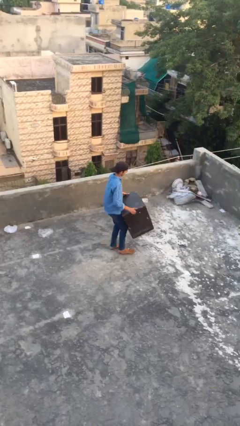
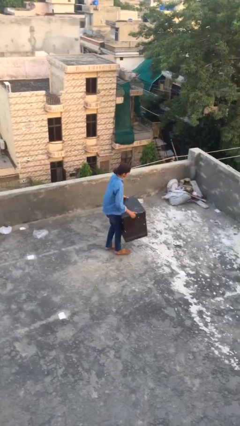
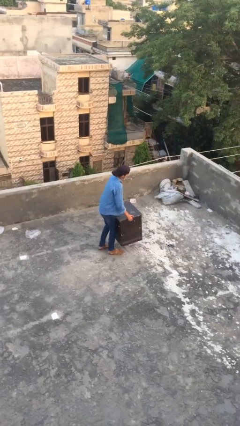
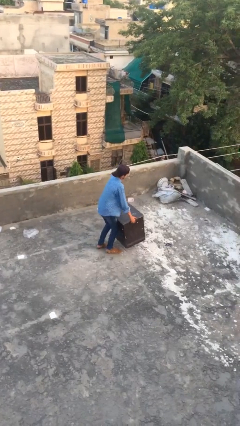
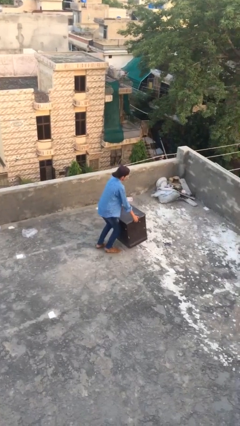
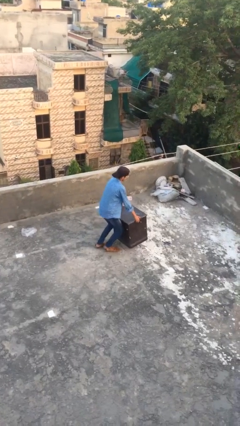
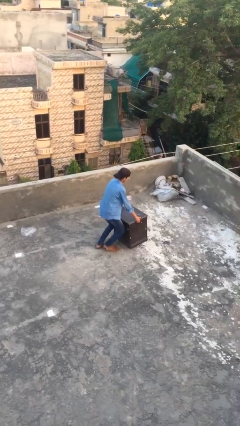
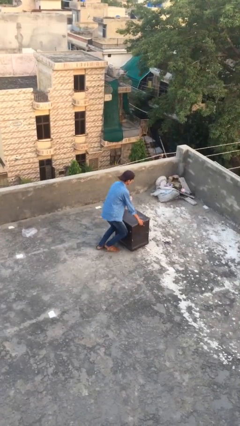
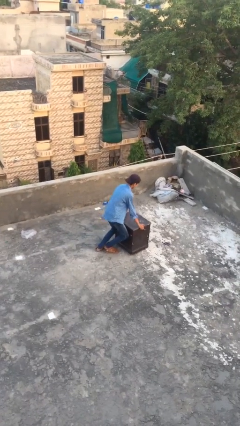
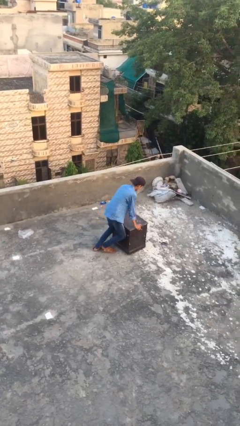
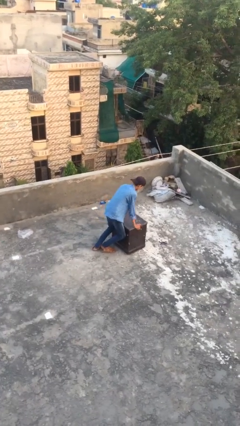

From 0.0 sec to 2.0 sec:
person puts down object on floor

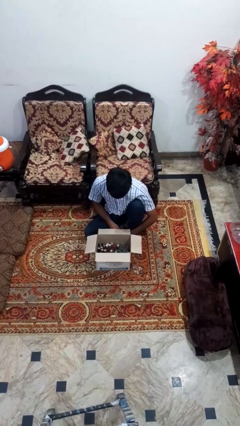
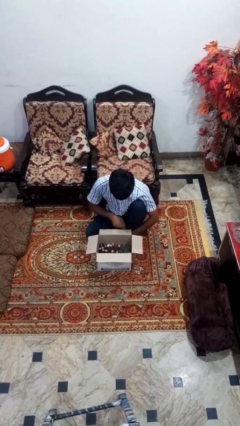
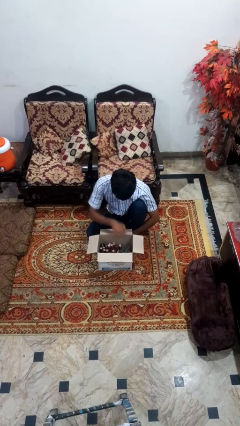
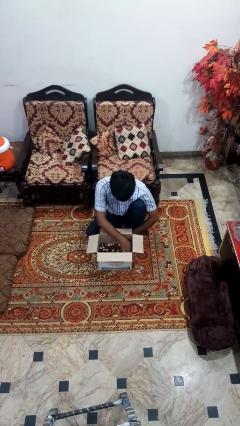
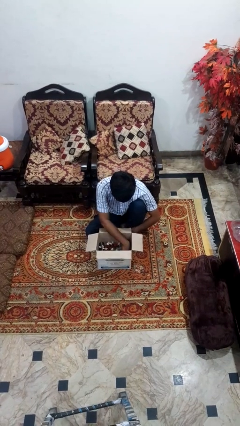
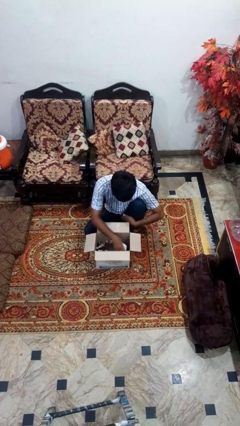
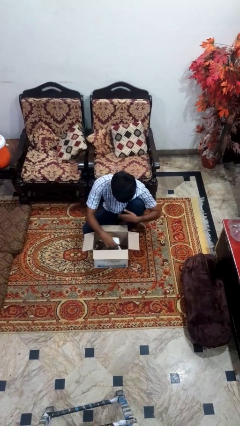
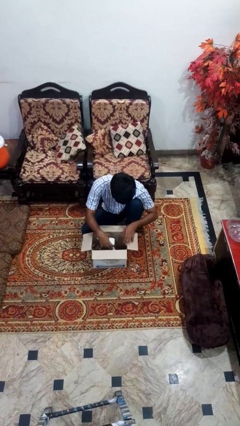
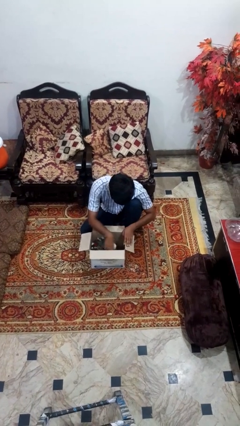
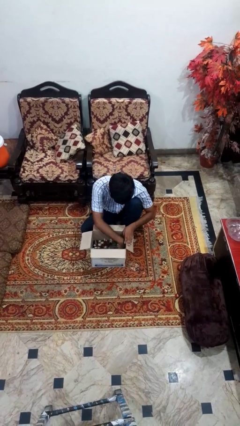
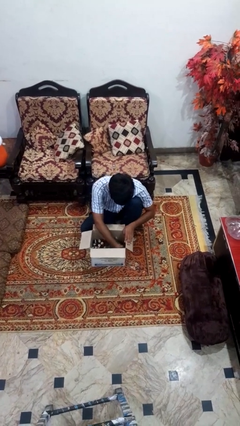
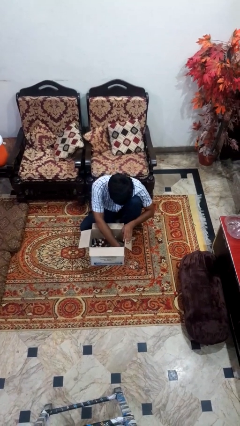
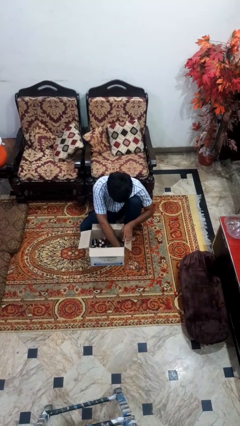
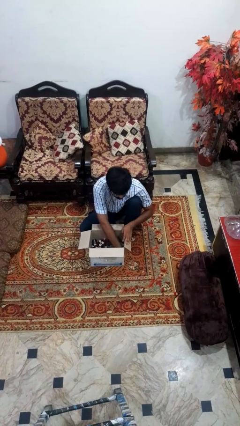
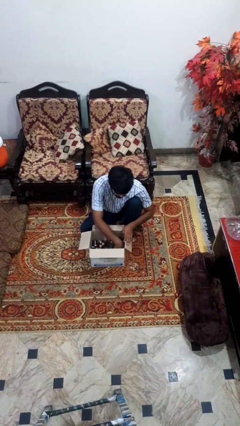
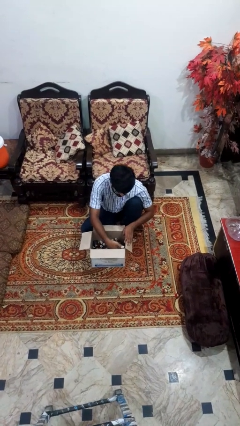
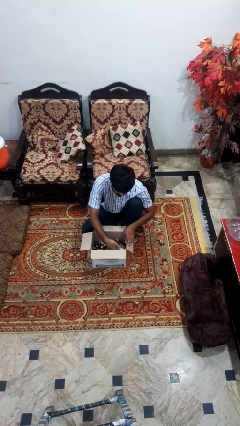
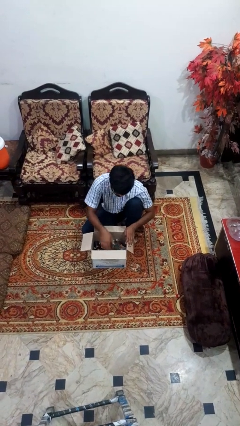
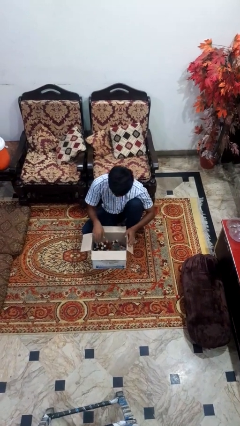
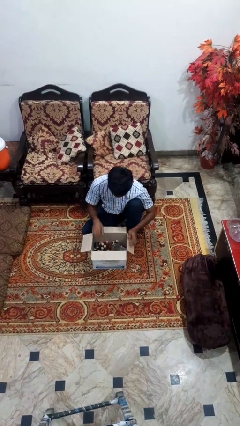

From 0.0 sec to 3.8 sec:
person searches in box

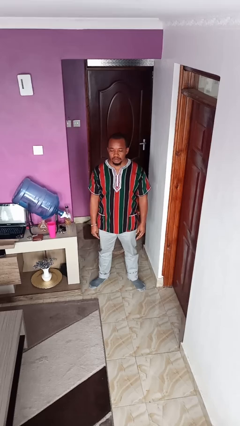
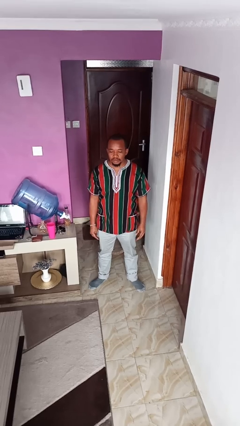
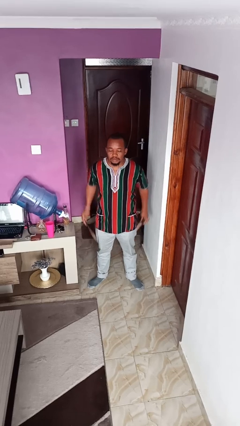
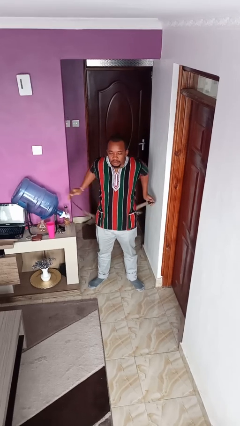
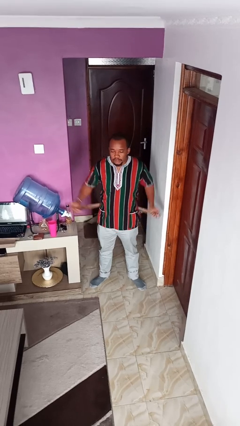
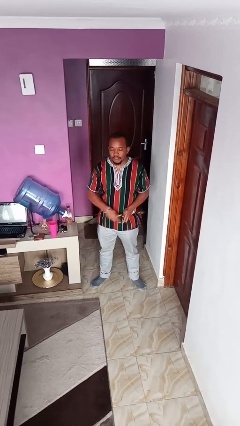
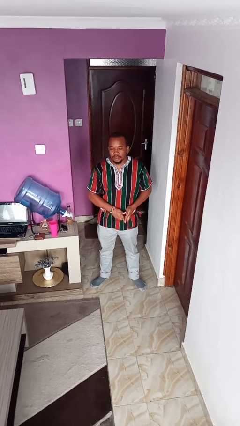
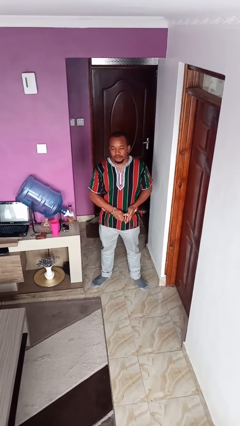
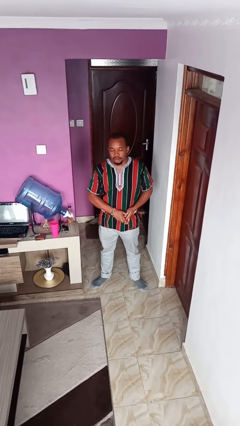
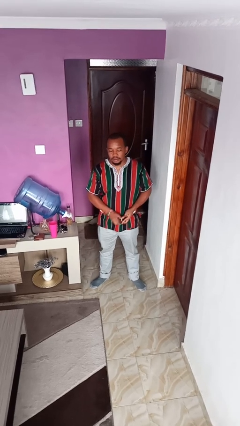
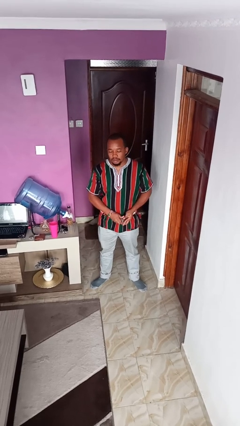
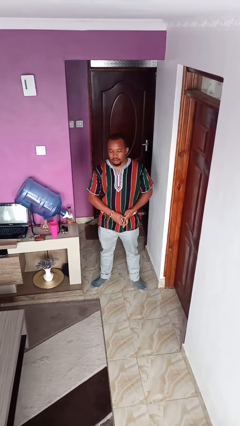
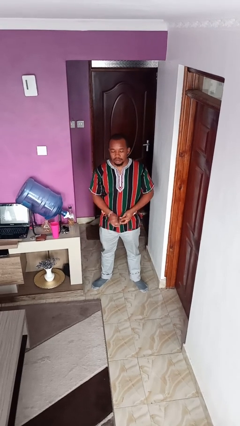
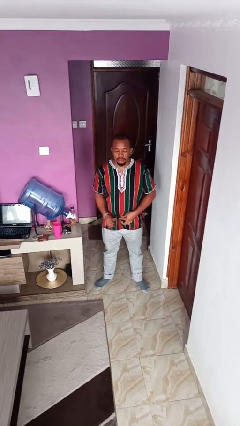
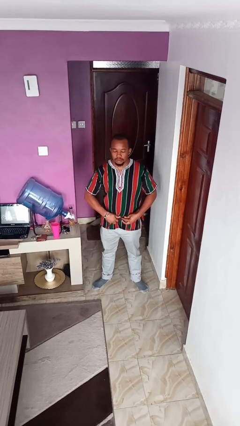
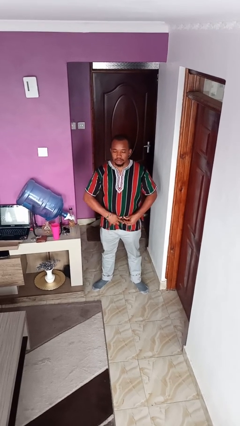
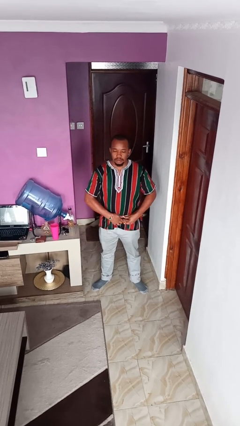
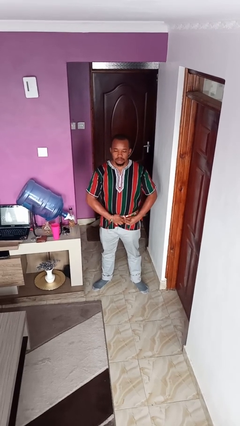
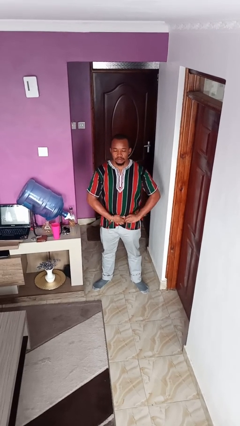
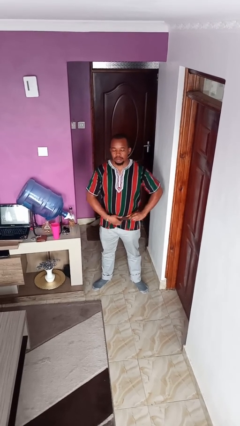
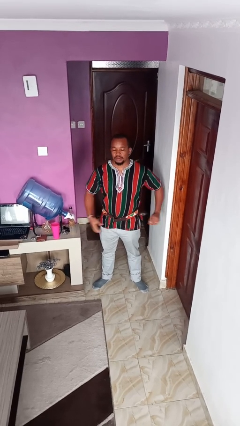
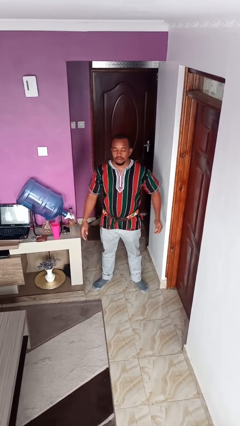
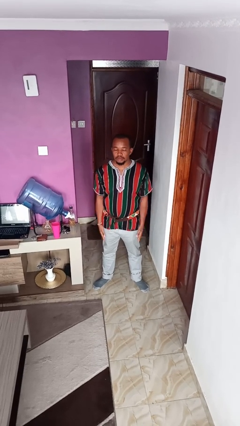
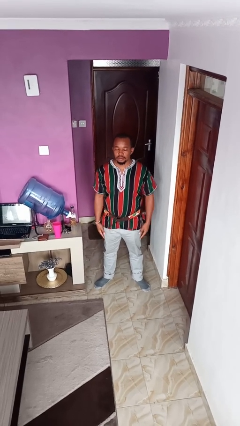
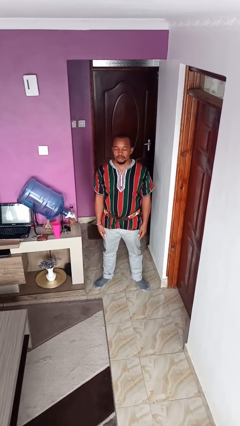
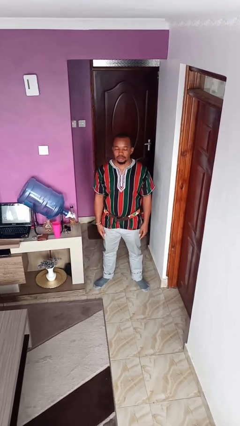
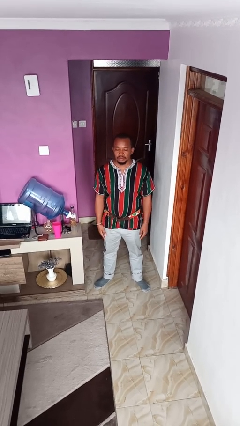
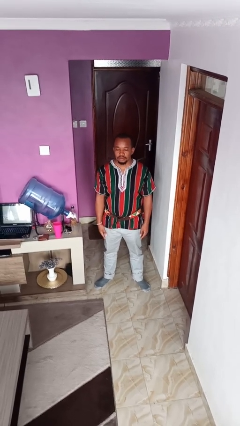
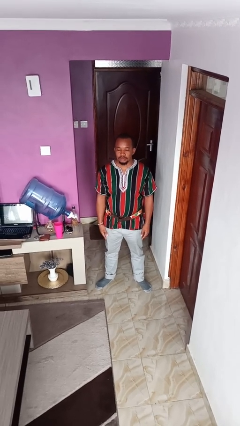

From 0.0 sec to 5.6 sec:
person puts on belt

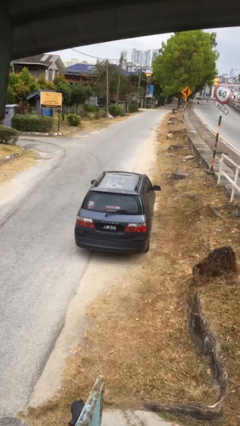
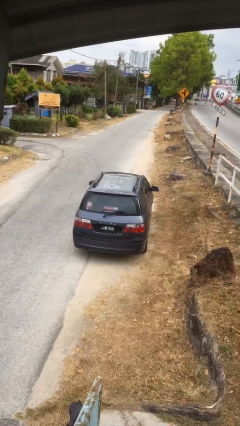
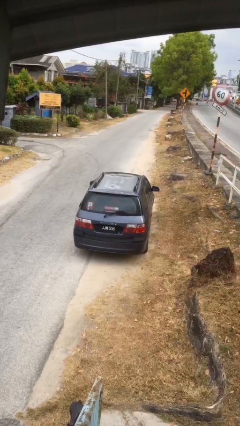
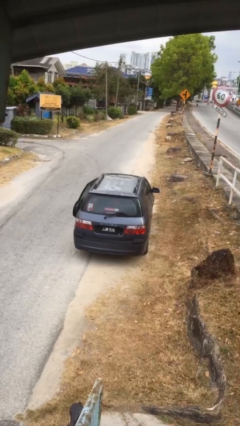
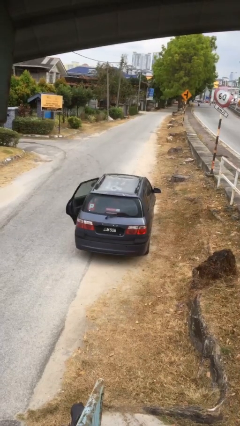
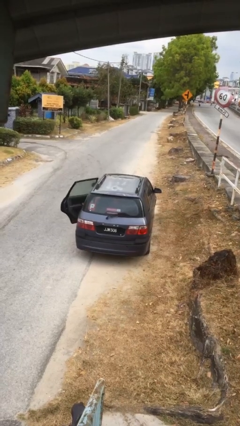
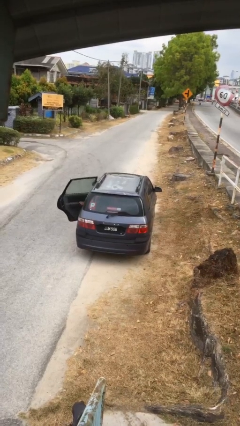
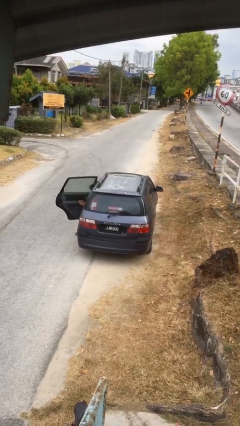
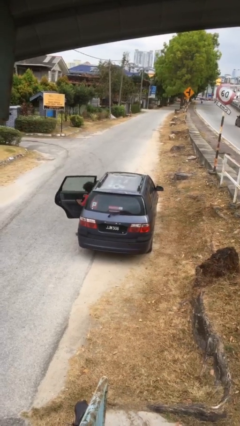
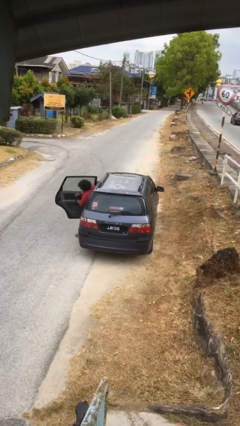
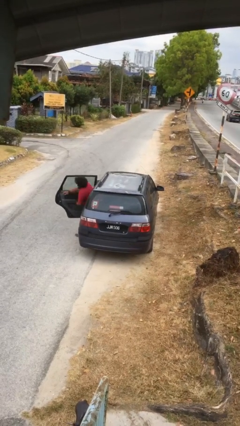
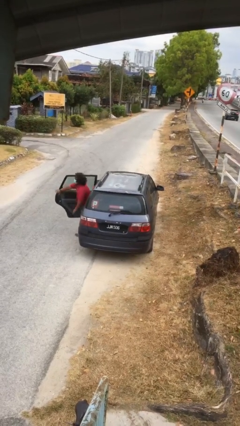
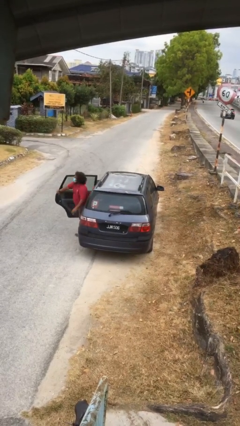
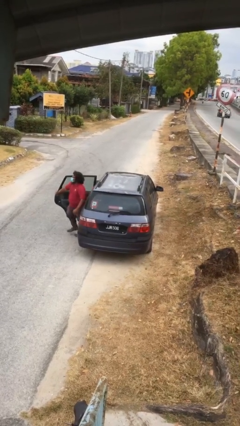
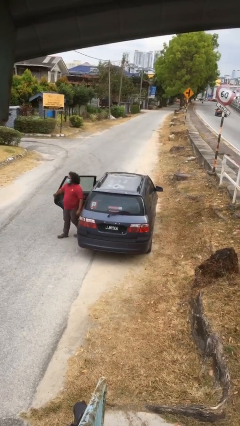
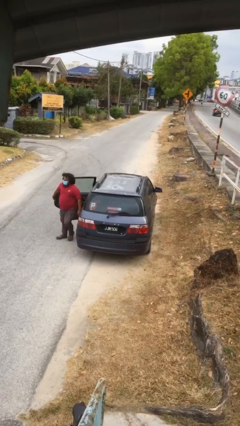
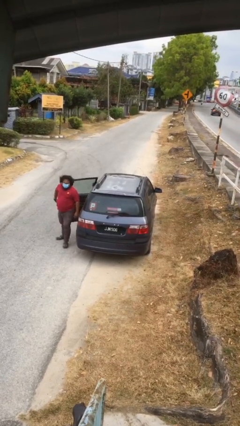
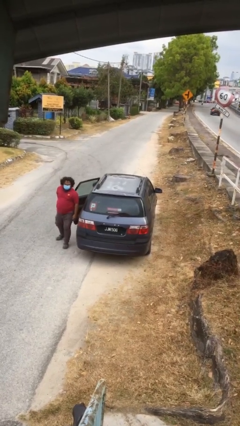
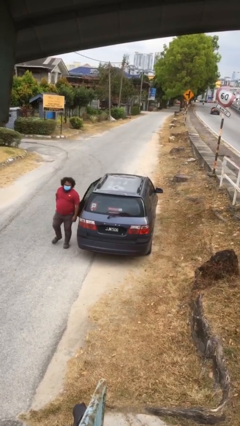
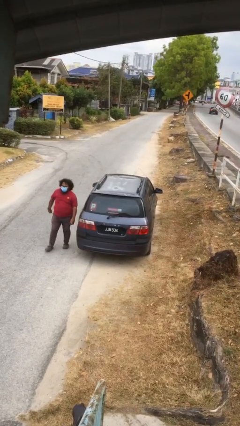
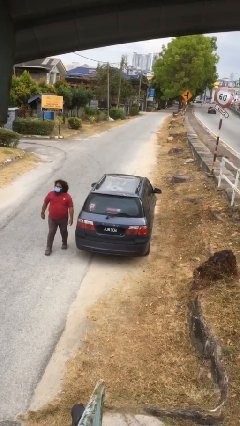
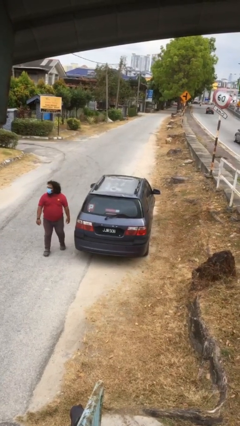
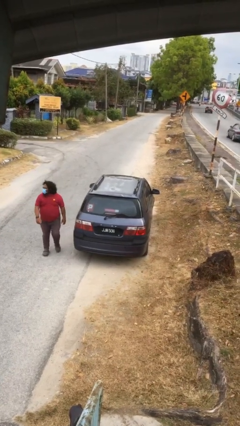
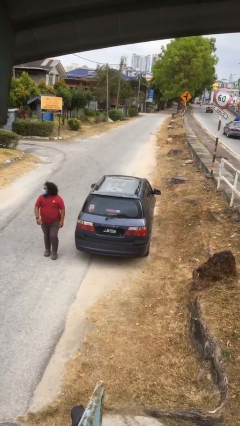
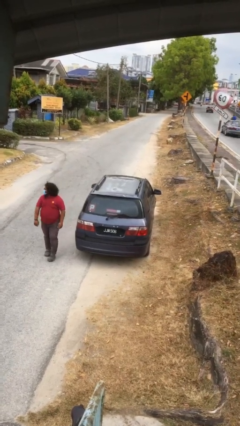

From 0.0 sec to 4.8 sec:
car drops off person

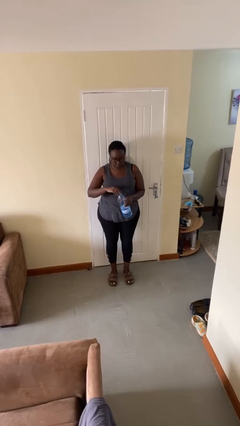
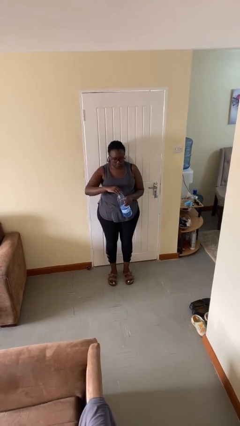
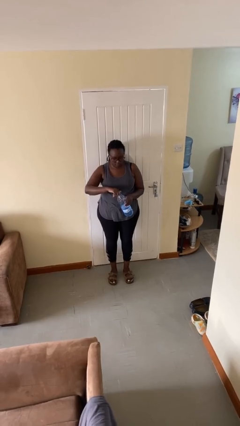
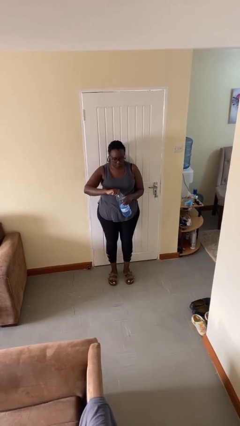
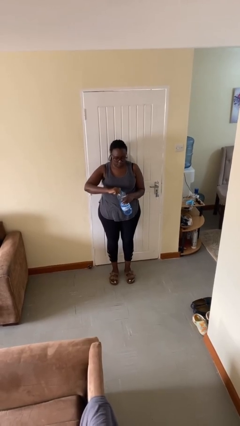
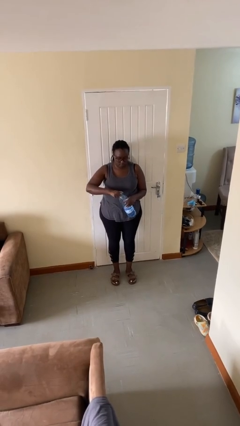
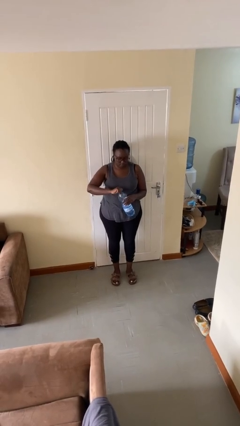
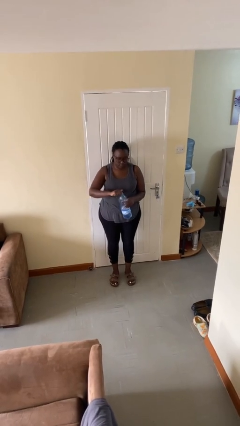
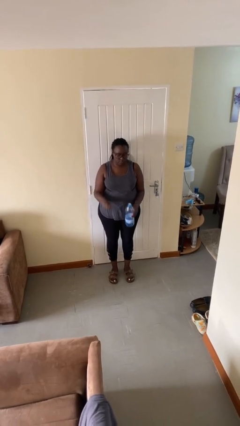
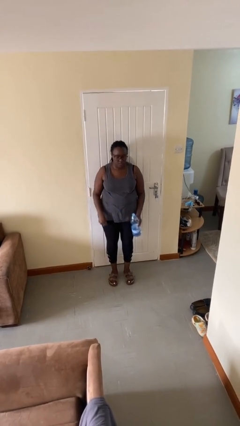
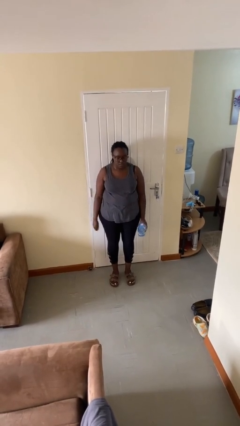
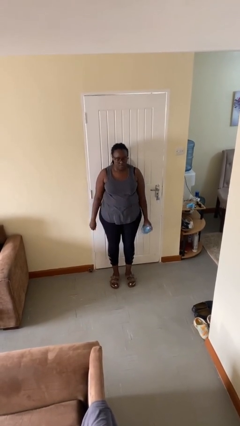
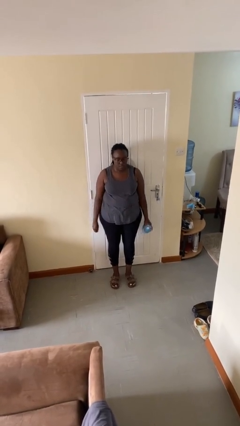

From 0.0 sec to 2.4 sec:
person screws lid to bottle
